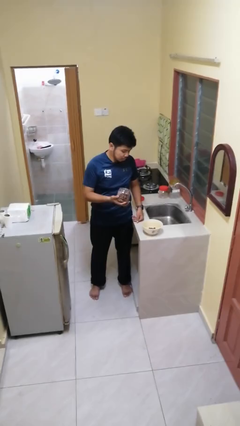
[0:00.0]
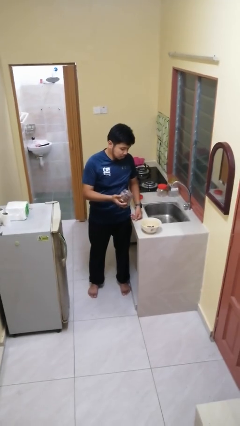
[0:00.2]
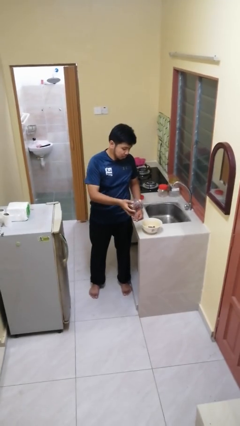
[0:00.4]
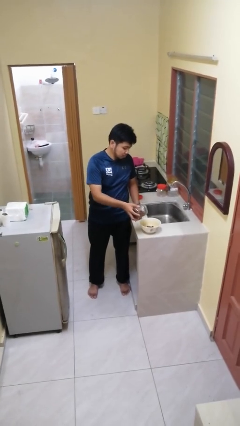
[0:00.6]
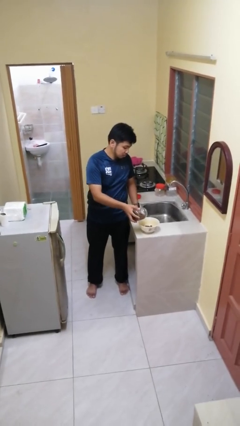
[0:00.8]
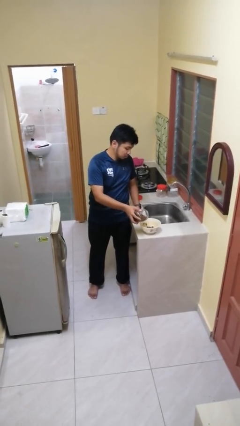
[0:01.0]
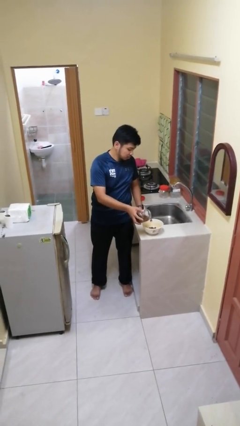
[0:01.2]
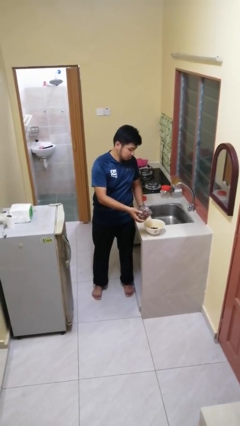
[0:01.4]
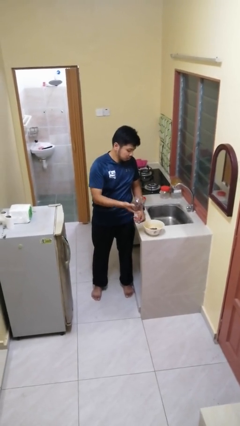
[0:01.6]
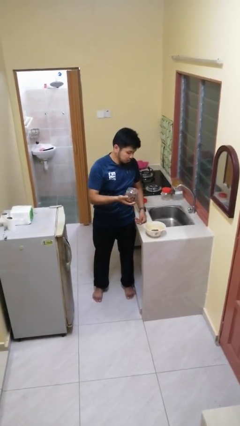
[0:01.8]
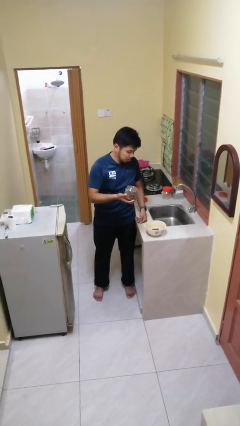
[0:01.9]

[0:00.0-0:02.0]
person pours into bowl

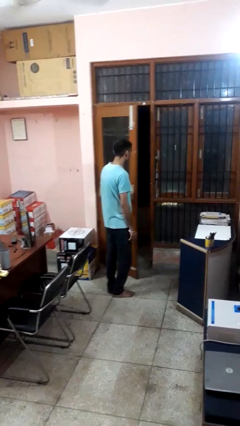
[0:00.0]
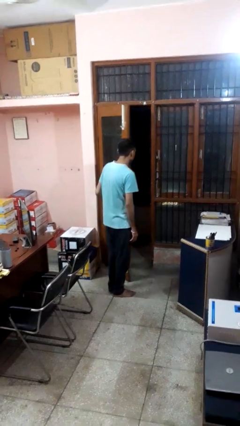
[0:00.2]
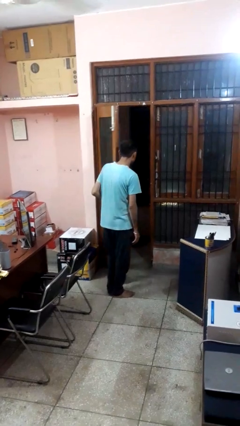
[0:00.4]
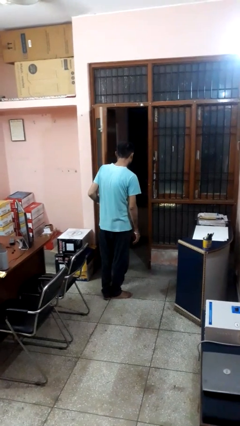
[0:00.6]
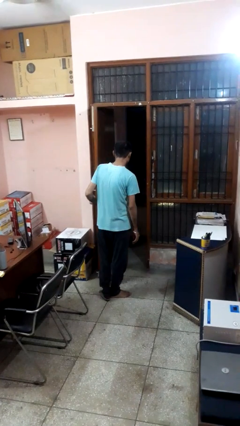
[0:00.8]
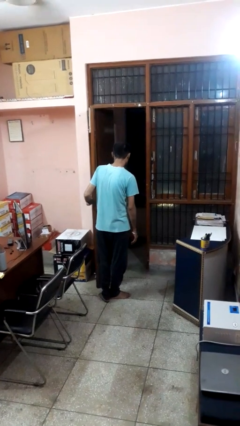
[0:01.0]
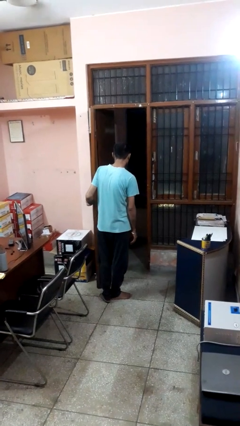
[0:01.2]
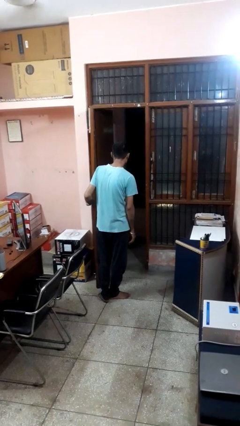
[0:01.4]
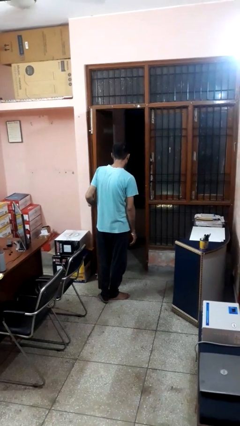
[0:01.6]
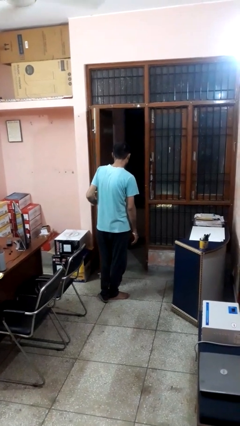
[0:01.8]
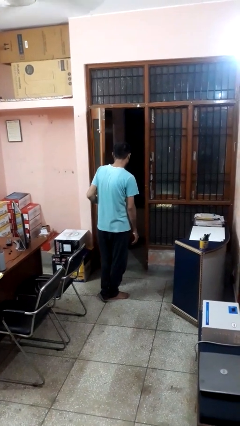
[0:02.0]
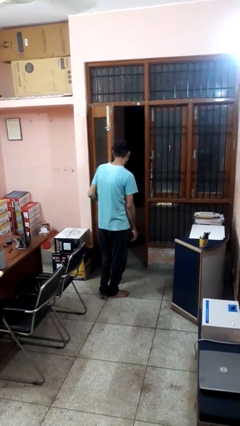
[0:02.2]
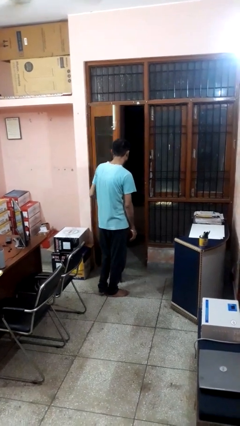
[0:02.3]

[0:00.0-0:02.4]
person opens facility door

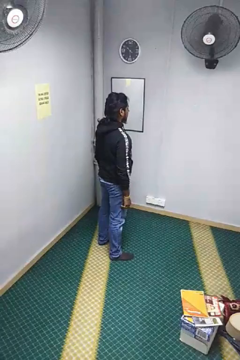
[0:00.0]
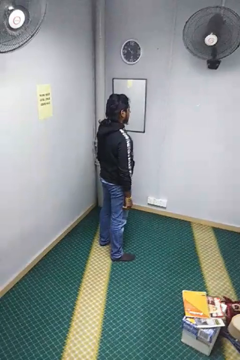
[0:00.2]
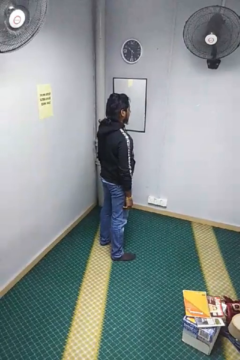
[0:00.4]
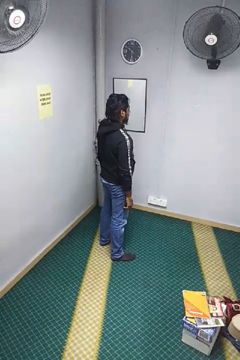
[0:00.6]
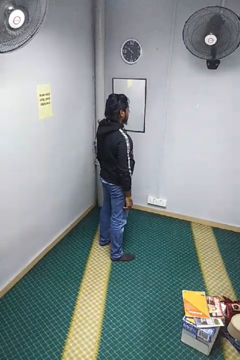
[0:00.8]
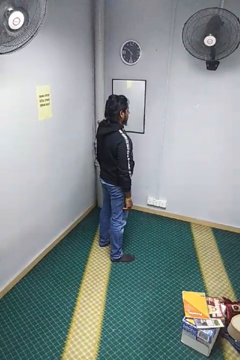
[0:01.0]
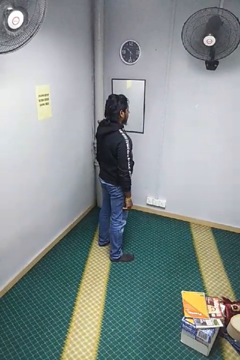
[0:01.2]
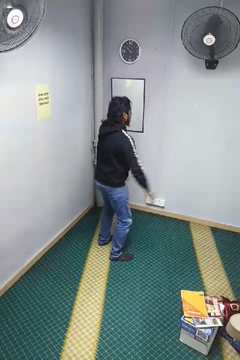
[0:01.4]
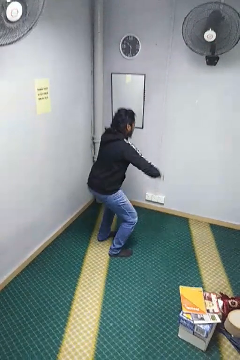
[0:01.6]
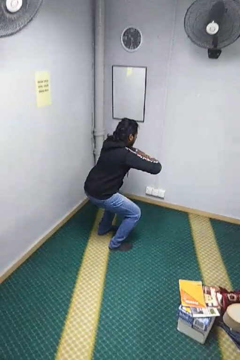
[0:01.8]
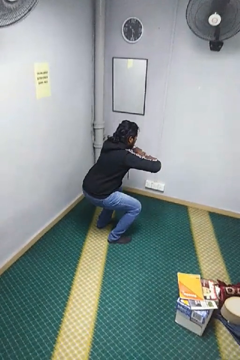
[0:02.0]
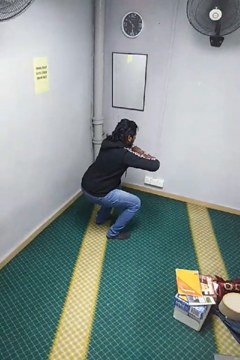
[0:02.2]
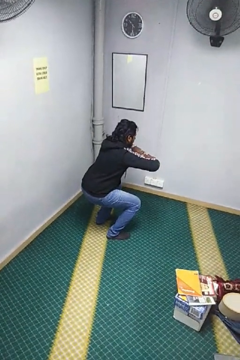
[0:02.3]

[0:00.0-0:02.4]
person squats

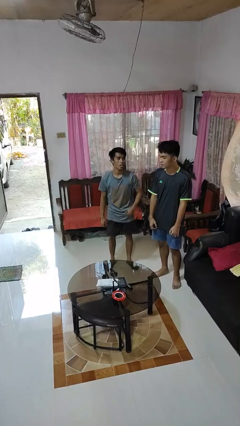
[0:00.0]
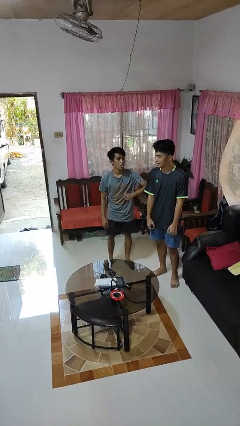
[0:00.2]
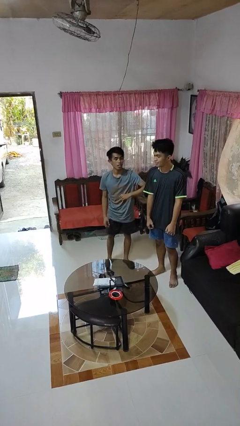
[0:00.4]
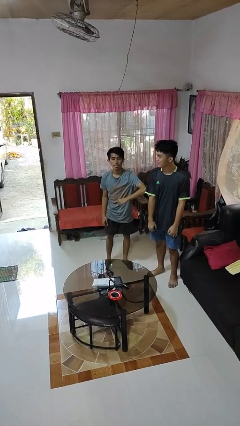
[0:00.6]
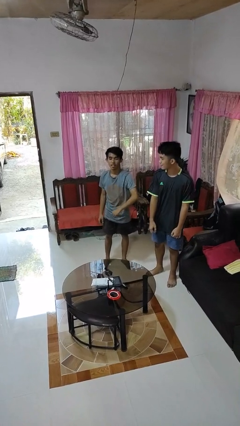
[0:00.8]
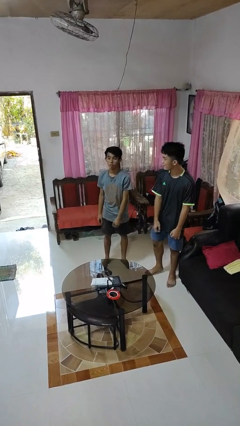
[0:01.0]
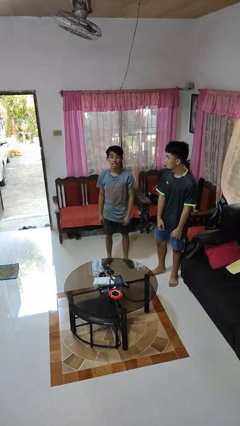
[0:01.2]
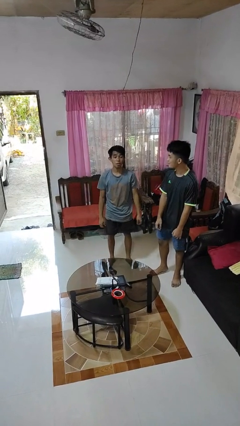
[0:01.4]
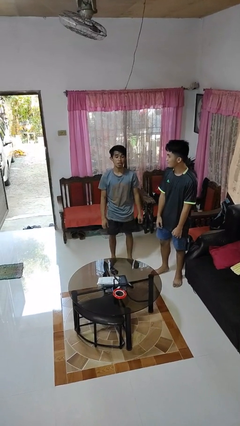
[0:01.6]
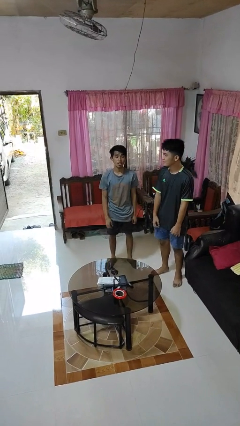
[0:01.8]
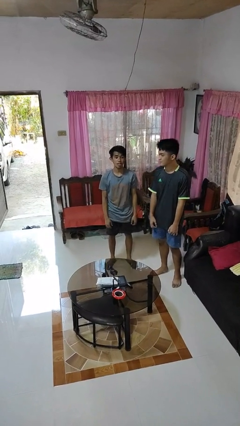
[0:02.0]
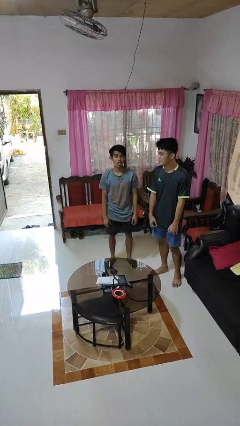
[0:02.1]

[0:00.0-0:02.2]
person nudges person with elbow

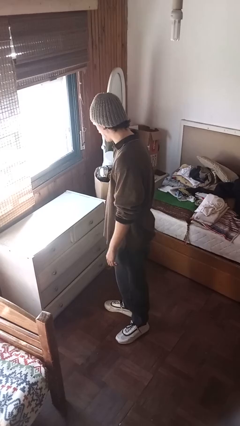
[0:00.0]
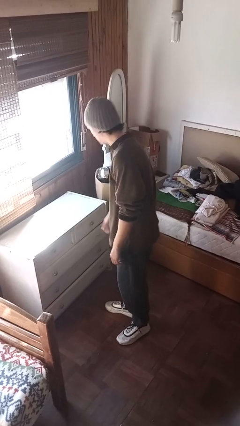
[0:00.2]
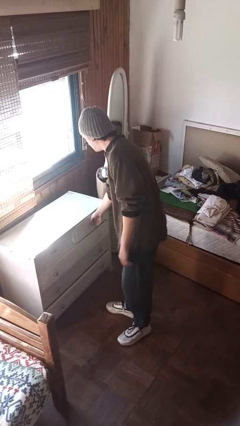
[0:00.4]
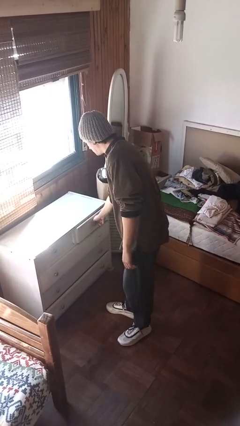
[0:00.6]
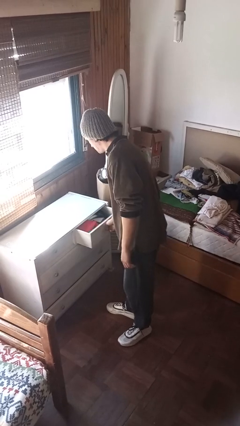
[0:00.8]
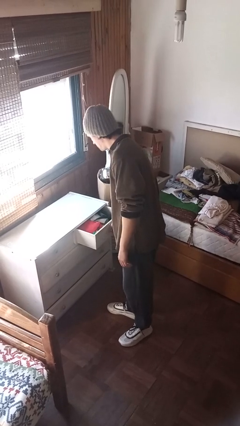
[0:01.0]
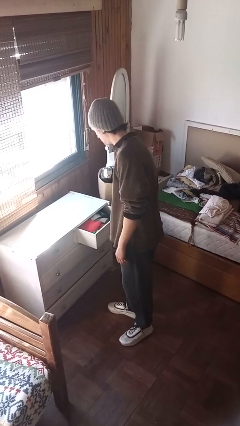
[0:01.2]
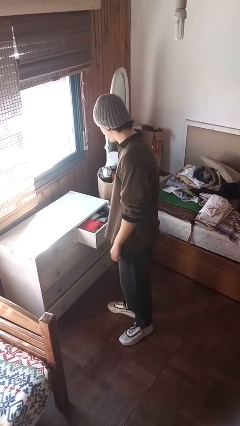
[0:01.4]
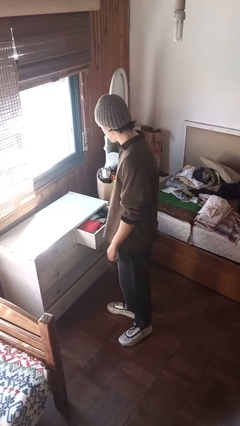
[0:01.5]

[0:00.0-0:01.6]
person opens dresser drawer

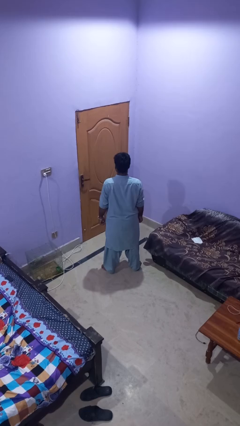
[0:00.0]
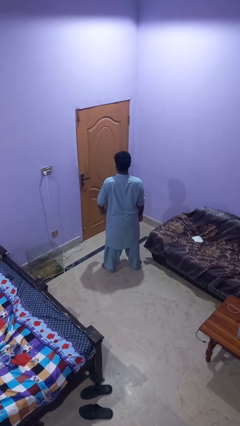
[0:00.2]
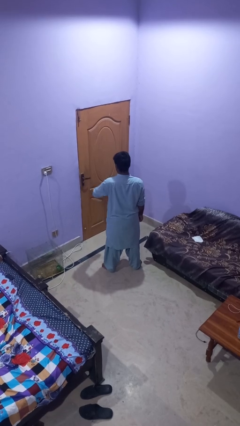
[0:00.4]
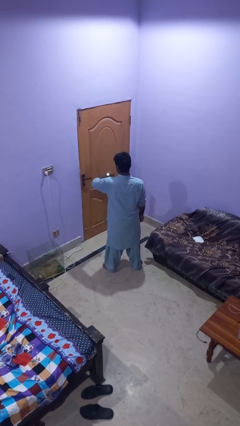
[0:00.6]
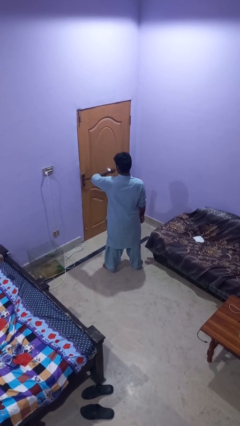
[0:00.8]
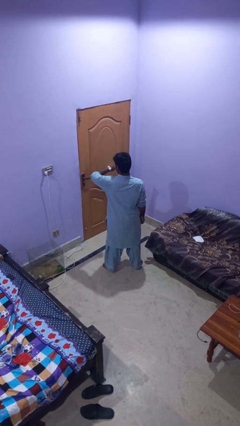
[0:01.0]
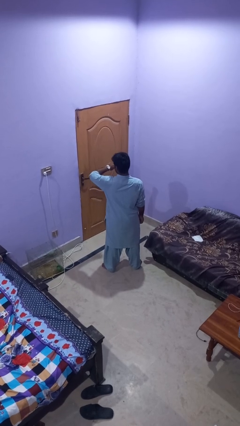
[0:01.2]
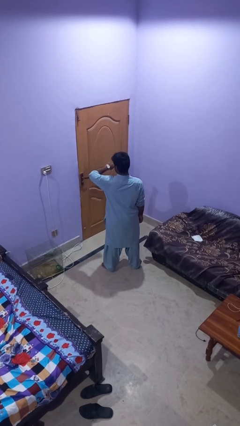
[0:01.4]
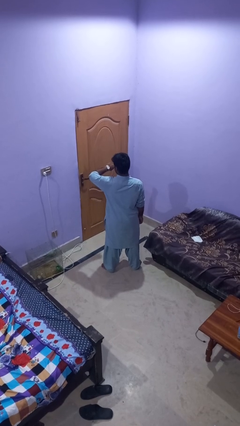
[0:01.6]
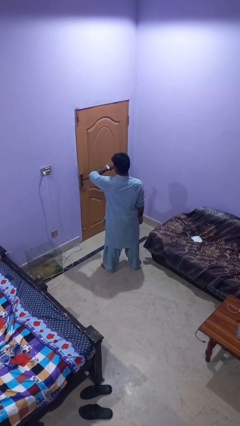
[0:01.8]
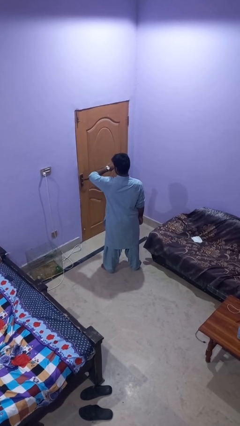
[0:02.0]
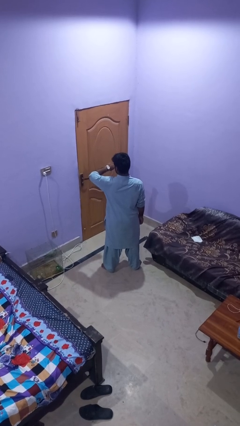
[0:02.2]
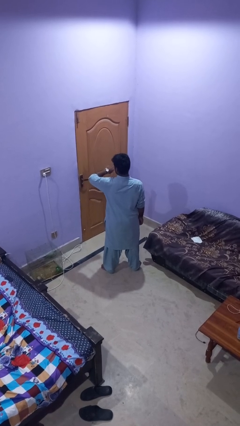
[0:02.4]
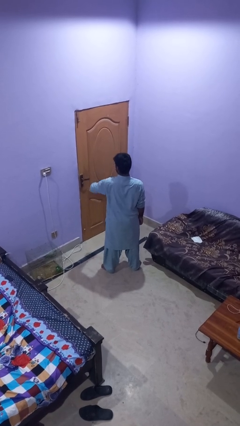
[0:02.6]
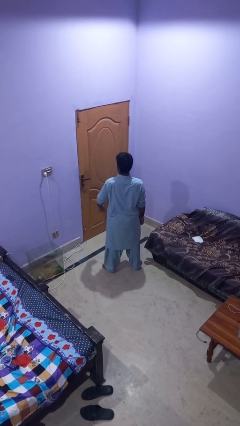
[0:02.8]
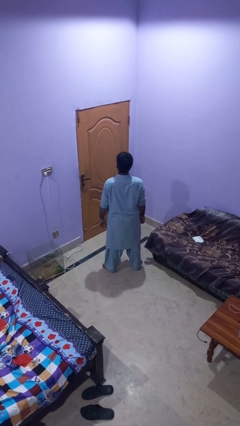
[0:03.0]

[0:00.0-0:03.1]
person looks at wristwatch

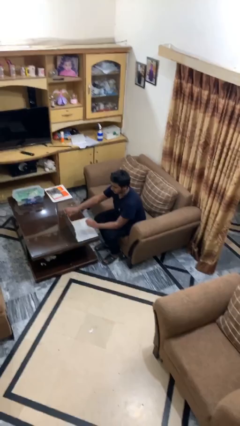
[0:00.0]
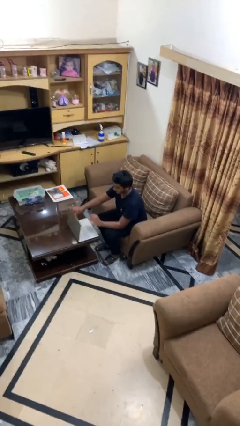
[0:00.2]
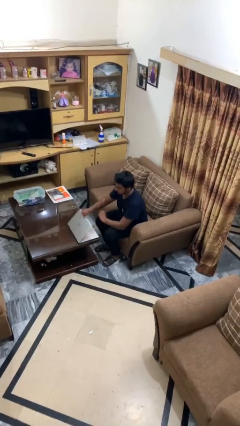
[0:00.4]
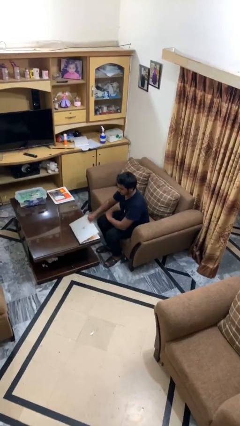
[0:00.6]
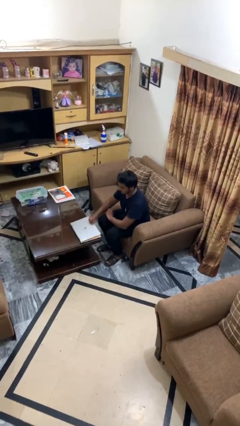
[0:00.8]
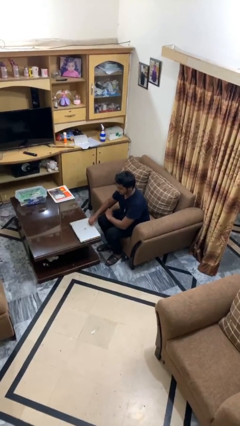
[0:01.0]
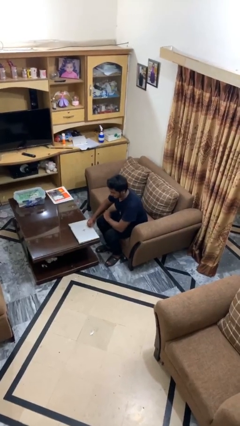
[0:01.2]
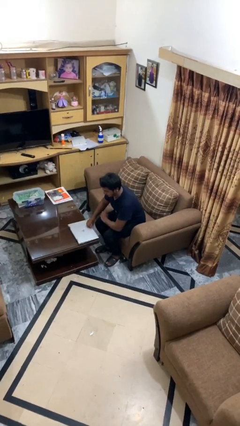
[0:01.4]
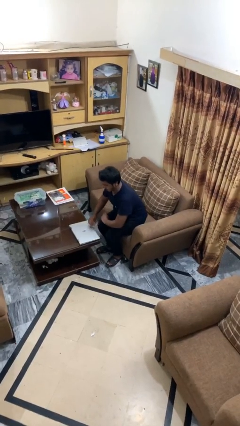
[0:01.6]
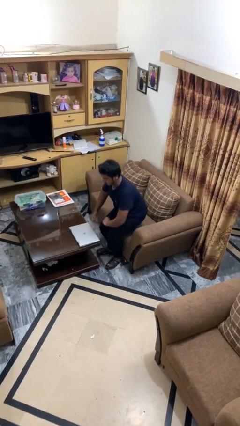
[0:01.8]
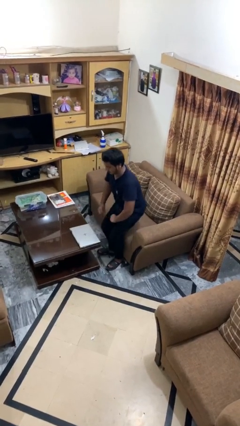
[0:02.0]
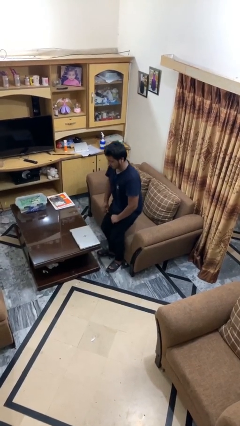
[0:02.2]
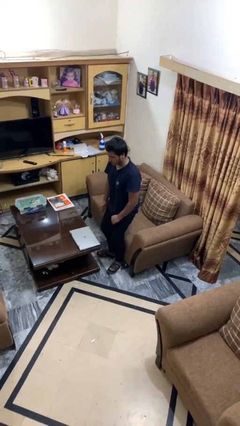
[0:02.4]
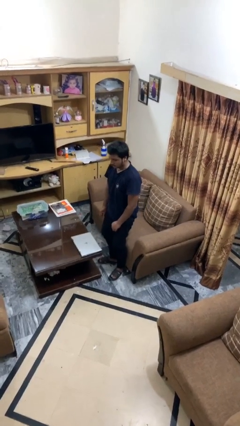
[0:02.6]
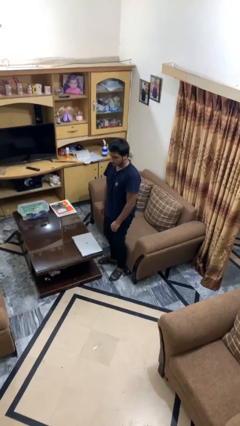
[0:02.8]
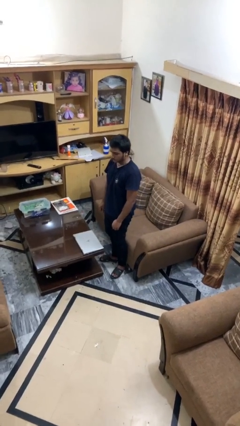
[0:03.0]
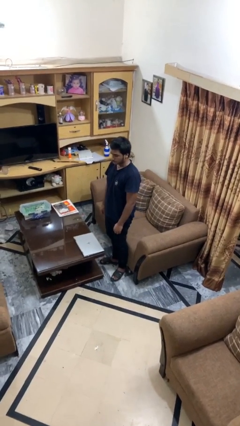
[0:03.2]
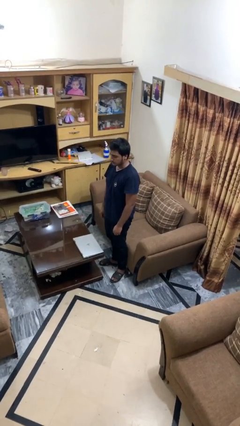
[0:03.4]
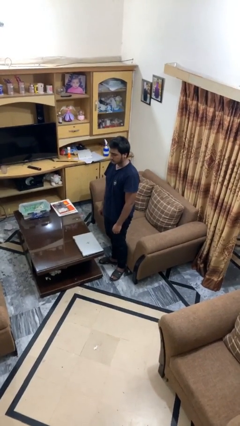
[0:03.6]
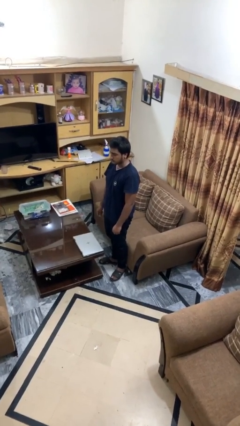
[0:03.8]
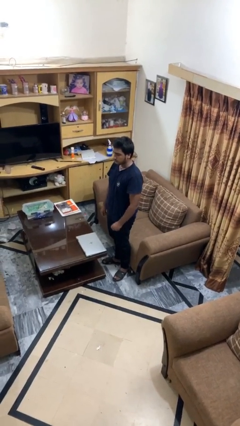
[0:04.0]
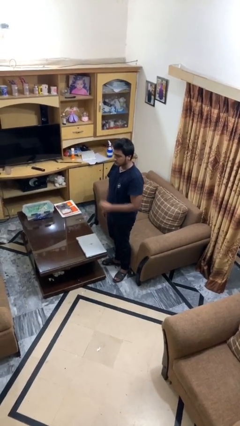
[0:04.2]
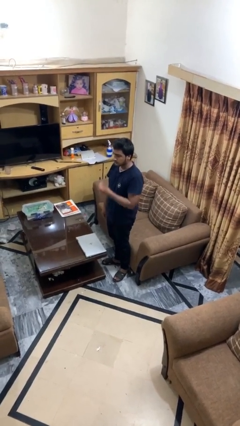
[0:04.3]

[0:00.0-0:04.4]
person stands up
